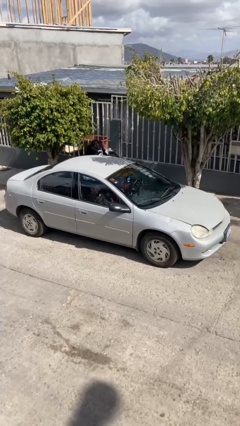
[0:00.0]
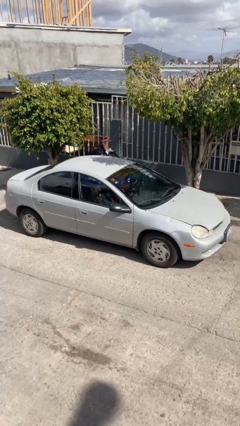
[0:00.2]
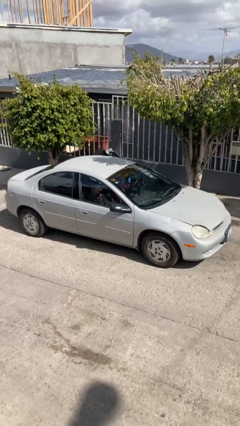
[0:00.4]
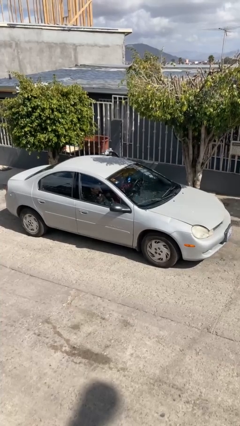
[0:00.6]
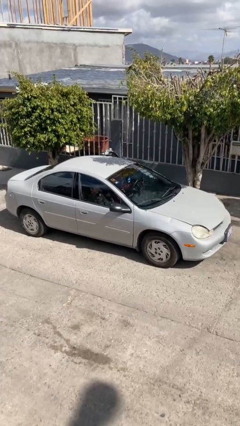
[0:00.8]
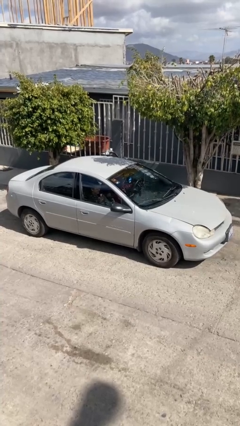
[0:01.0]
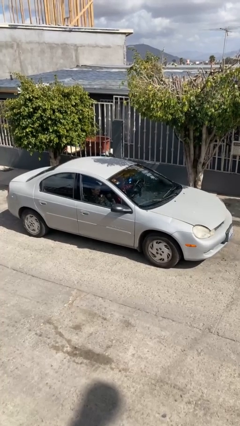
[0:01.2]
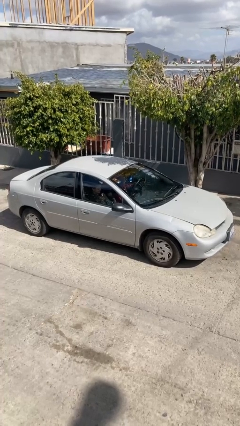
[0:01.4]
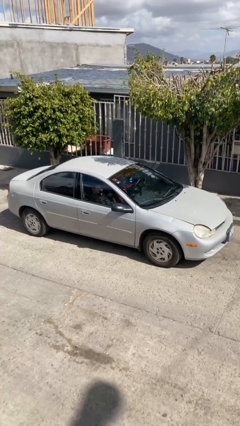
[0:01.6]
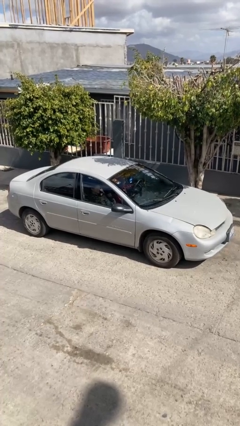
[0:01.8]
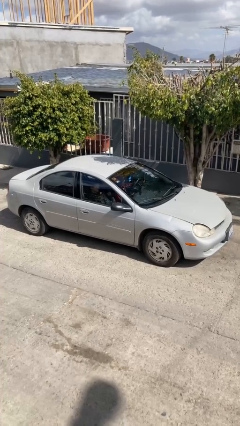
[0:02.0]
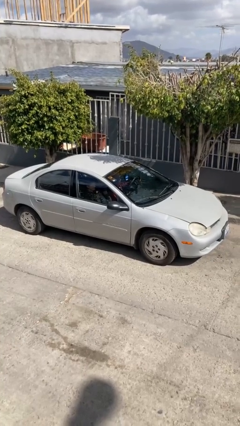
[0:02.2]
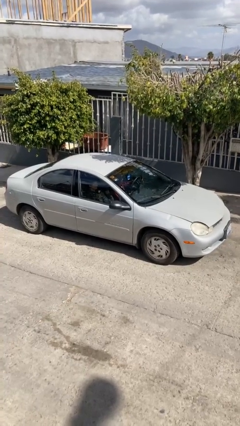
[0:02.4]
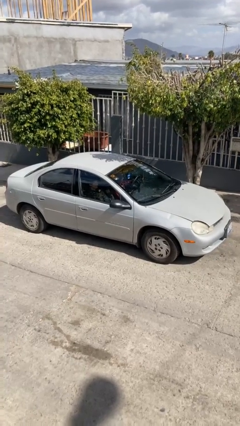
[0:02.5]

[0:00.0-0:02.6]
car picks up person

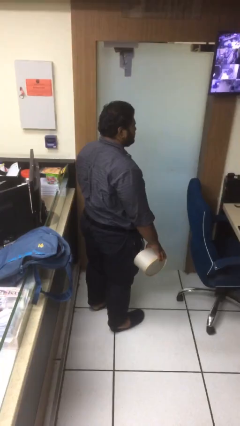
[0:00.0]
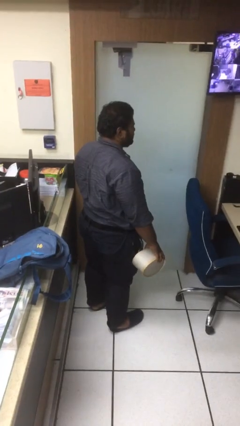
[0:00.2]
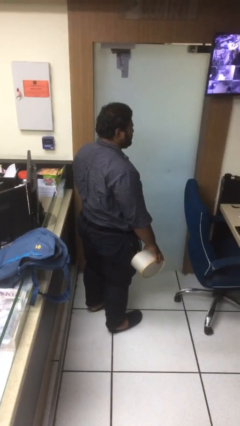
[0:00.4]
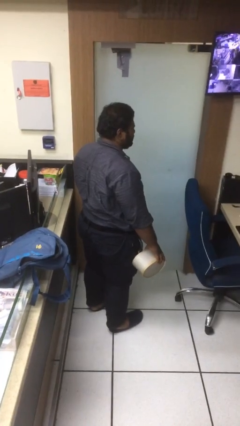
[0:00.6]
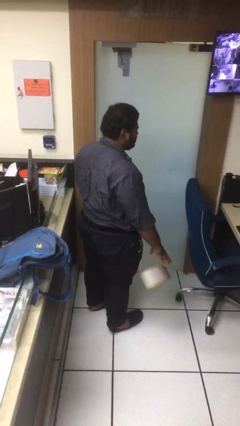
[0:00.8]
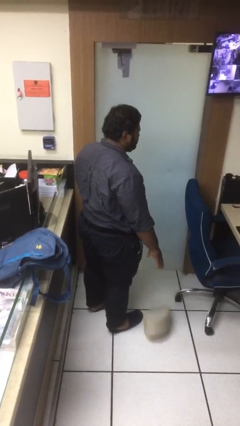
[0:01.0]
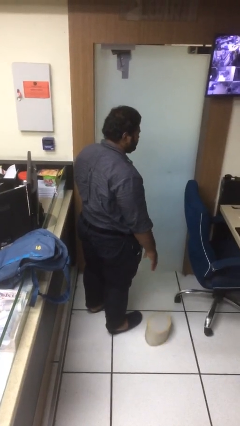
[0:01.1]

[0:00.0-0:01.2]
person drops object

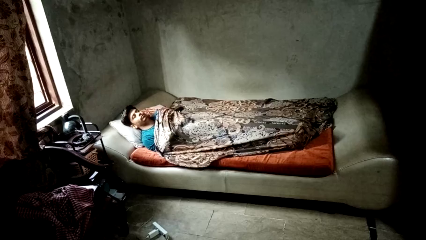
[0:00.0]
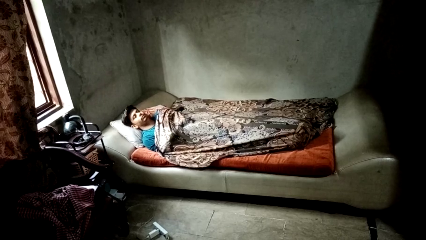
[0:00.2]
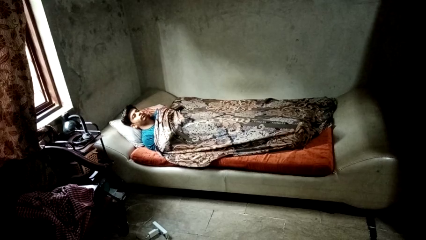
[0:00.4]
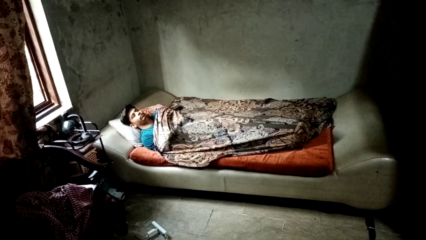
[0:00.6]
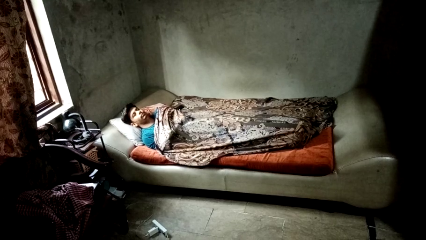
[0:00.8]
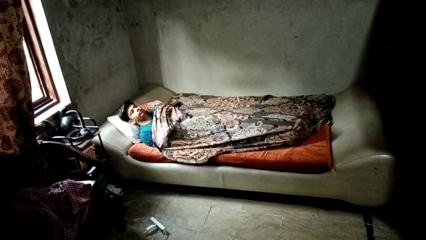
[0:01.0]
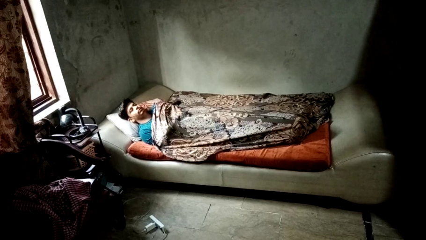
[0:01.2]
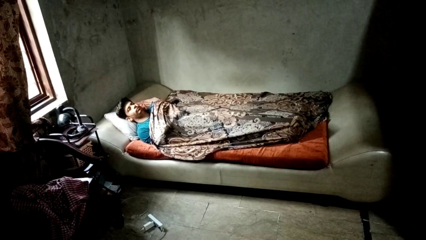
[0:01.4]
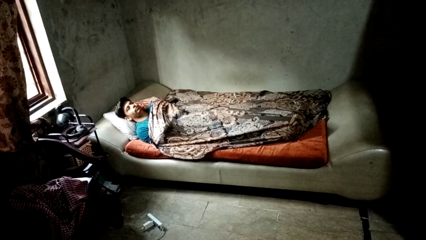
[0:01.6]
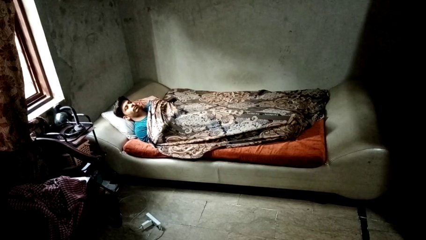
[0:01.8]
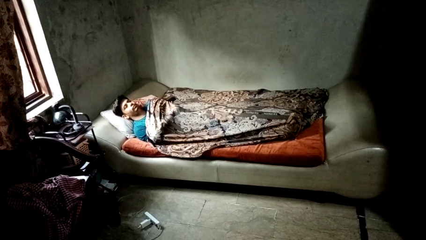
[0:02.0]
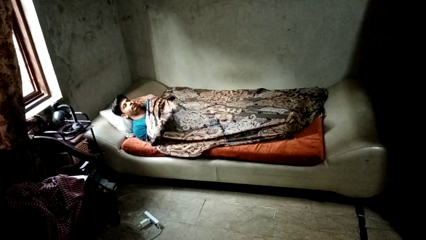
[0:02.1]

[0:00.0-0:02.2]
person covers with bedsheets

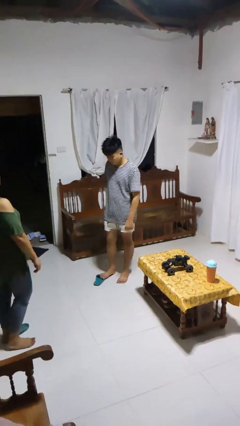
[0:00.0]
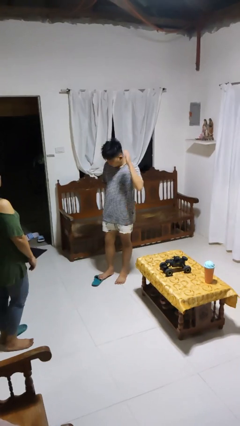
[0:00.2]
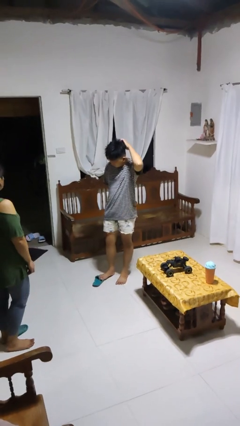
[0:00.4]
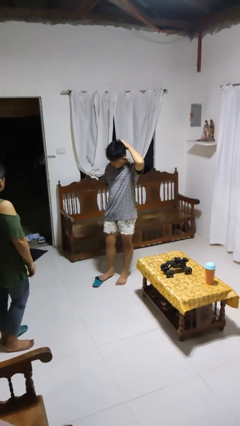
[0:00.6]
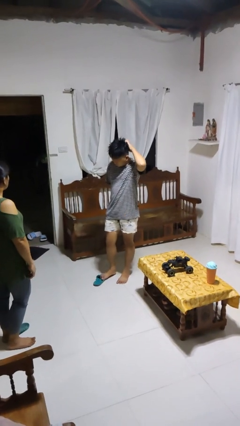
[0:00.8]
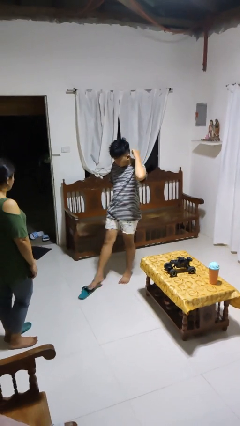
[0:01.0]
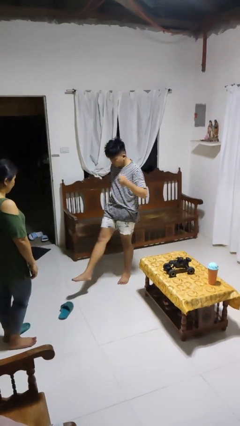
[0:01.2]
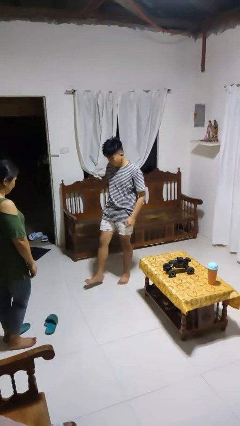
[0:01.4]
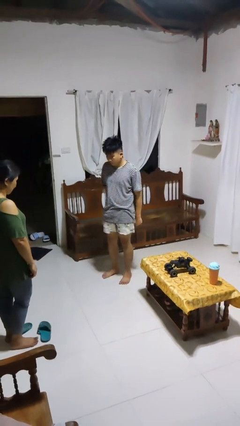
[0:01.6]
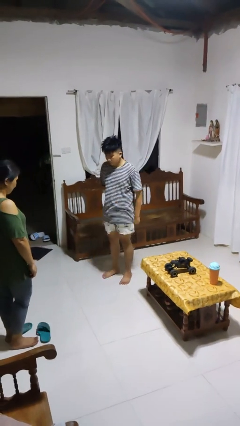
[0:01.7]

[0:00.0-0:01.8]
person kicks object to person

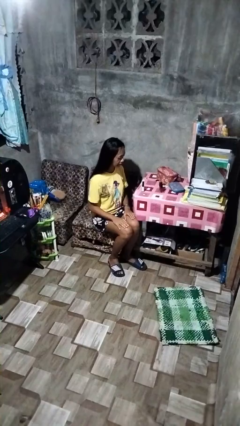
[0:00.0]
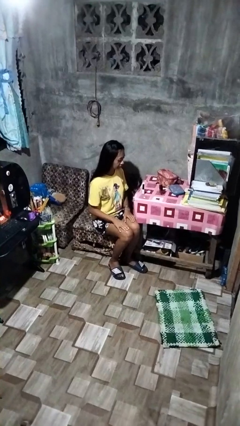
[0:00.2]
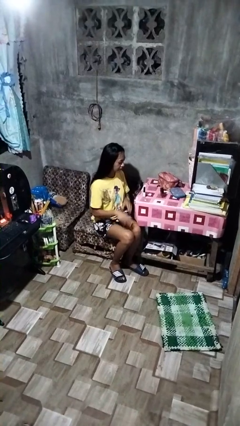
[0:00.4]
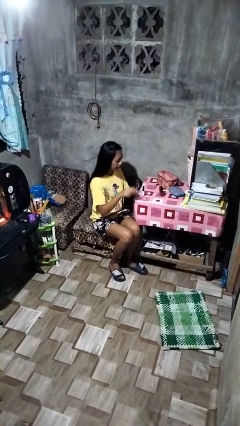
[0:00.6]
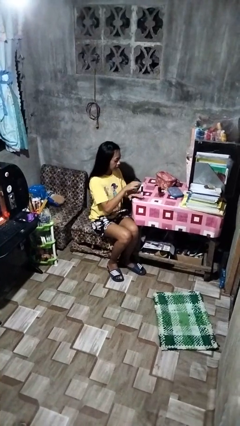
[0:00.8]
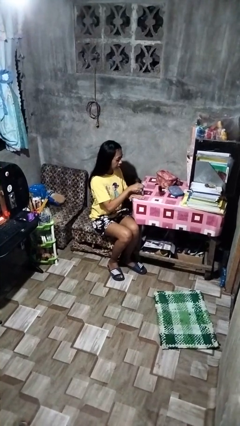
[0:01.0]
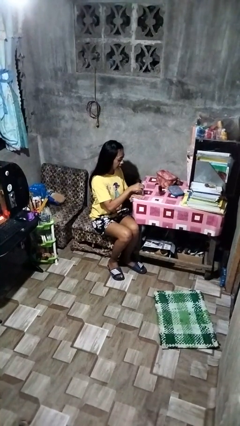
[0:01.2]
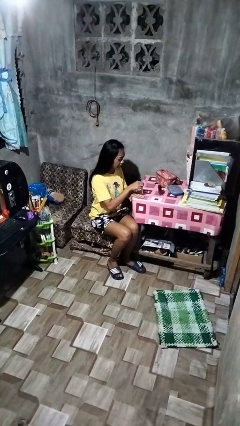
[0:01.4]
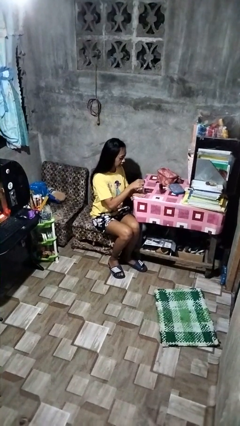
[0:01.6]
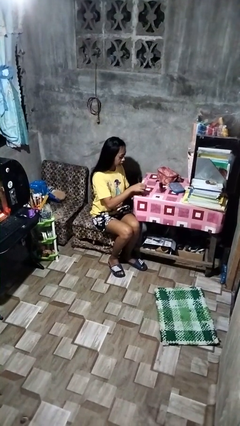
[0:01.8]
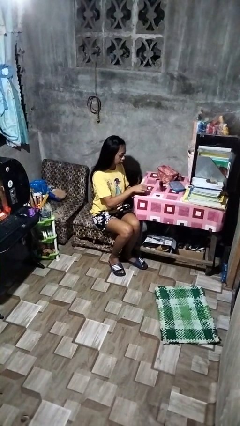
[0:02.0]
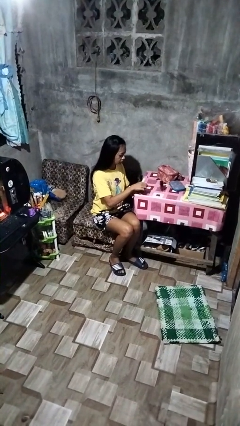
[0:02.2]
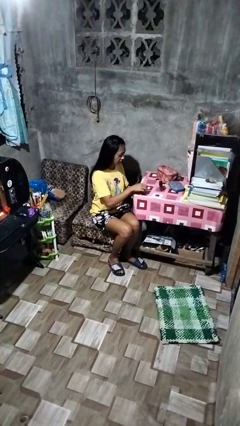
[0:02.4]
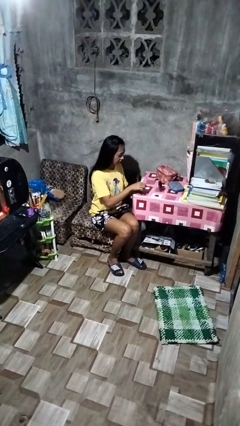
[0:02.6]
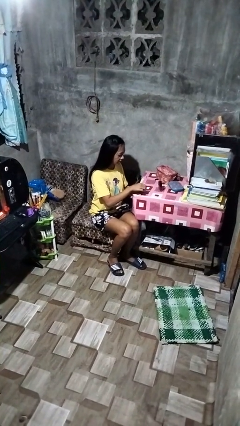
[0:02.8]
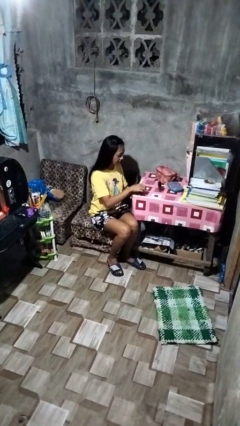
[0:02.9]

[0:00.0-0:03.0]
person paints fingernails

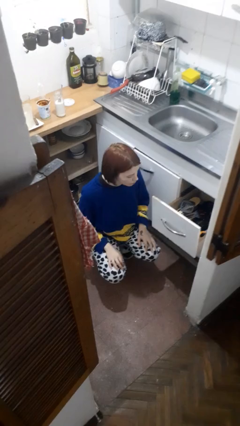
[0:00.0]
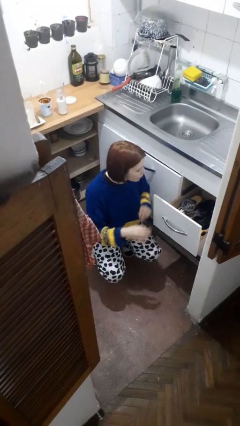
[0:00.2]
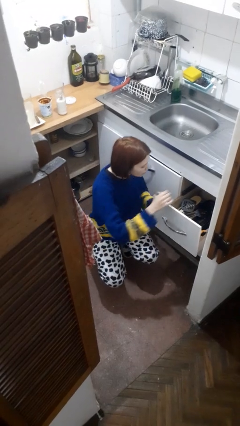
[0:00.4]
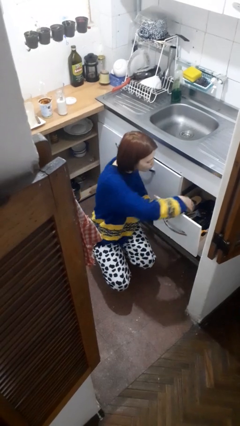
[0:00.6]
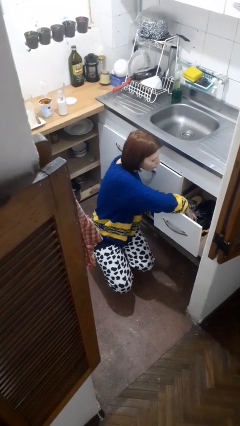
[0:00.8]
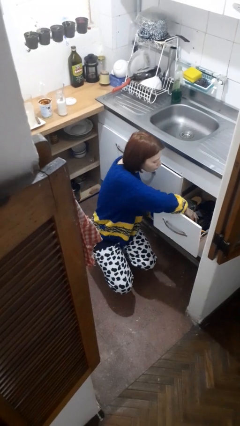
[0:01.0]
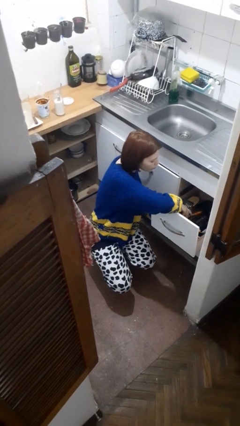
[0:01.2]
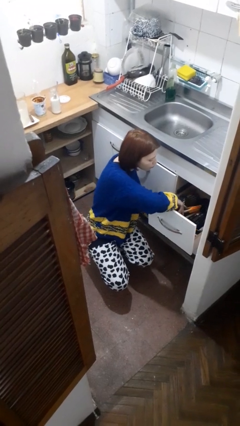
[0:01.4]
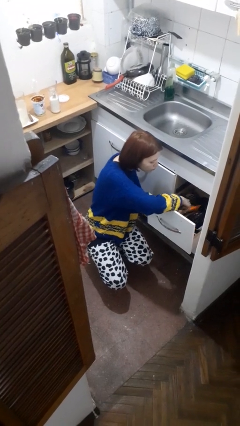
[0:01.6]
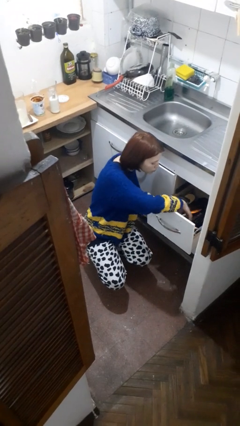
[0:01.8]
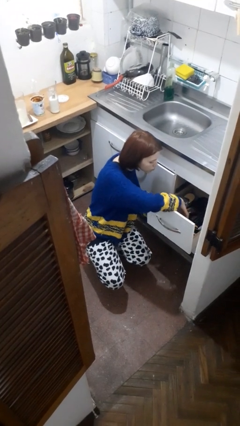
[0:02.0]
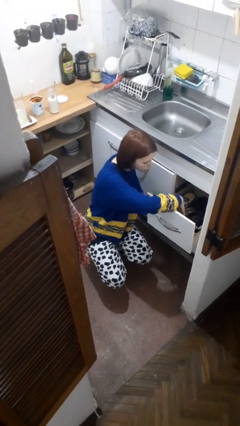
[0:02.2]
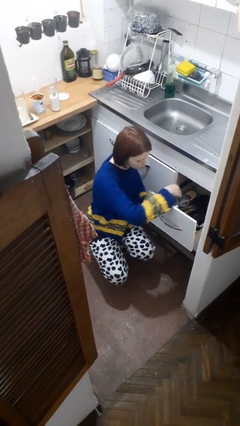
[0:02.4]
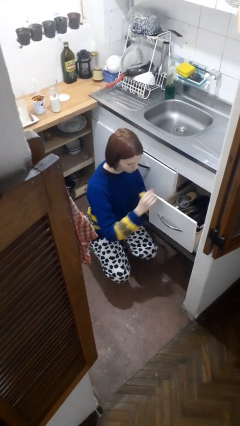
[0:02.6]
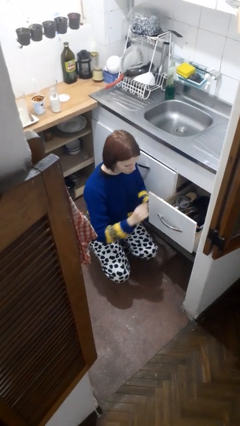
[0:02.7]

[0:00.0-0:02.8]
person searches in kitchen drawer

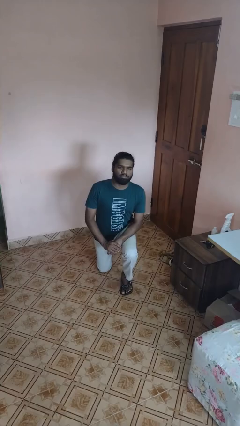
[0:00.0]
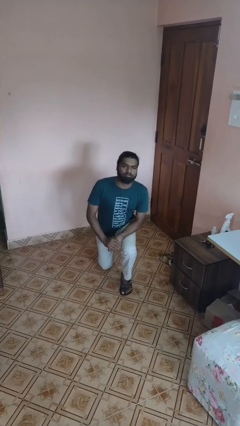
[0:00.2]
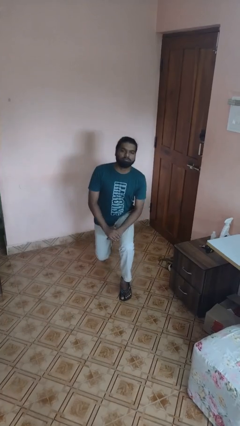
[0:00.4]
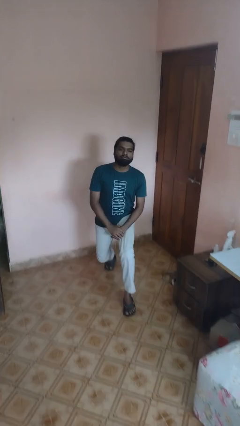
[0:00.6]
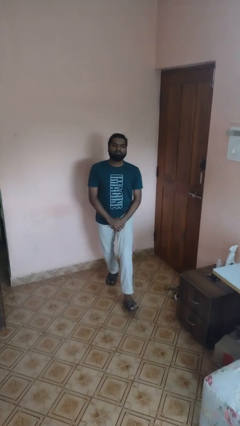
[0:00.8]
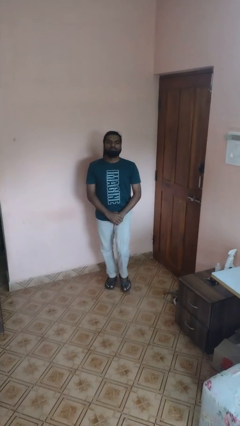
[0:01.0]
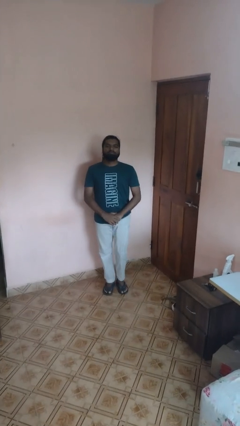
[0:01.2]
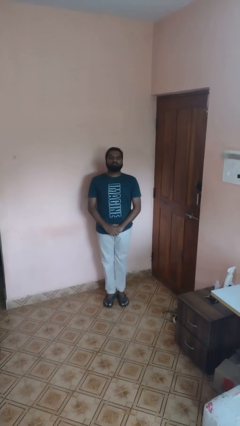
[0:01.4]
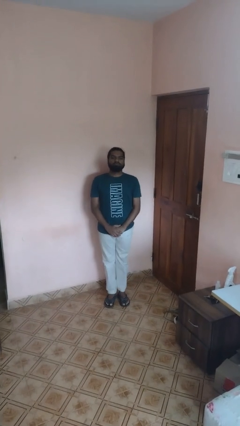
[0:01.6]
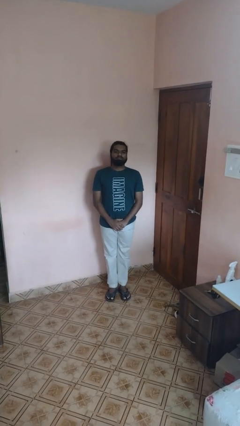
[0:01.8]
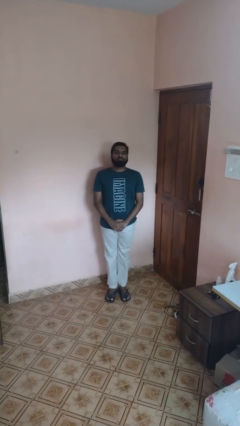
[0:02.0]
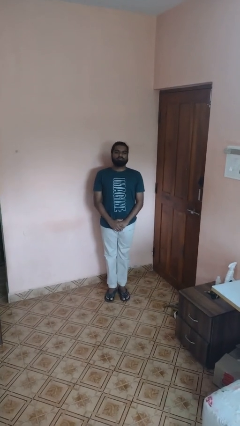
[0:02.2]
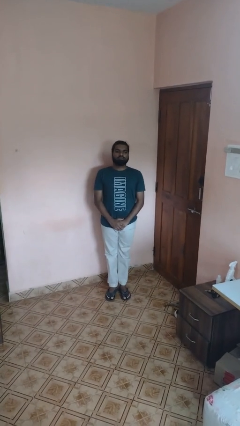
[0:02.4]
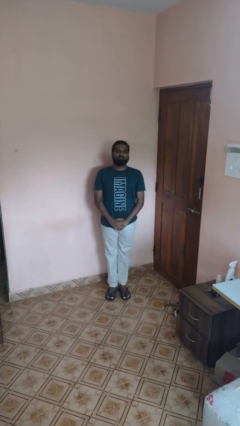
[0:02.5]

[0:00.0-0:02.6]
person stands up from floor

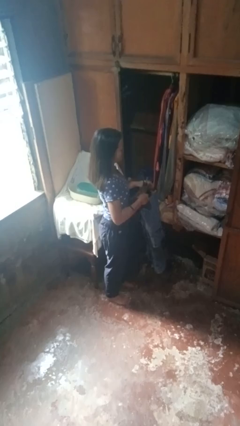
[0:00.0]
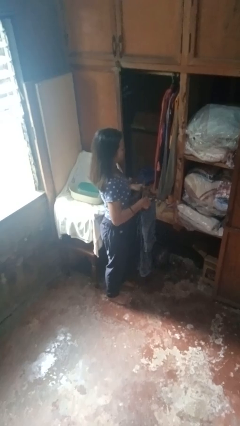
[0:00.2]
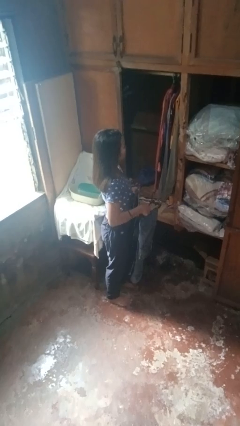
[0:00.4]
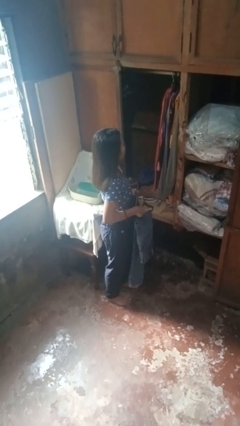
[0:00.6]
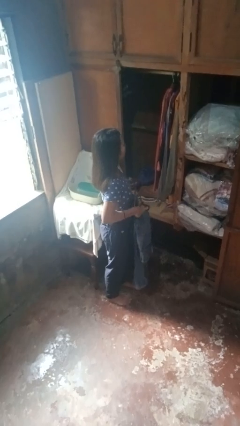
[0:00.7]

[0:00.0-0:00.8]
person takes clothes from closet
